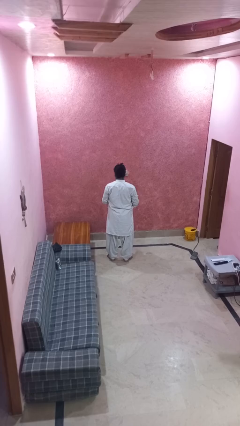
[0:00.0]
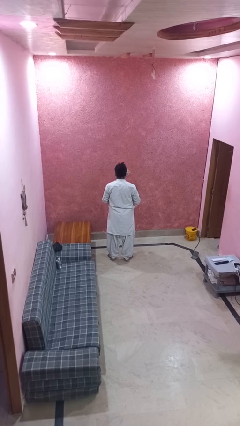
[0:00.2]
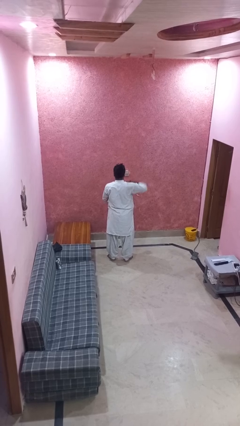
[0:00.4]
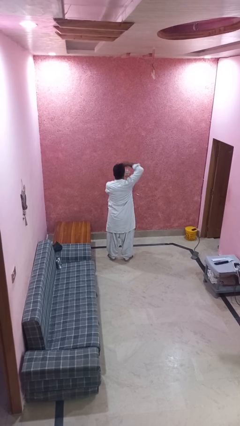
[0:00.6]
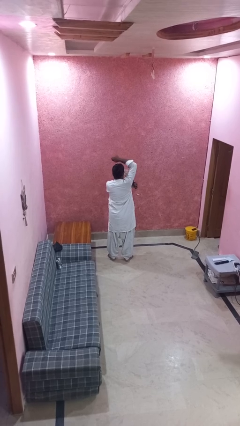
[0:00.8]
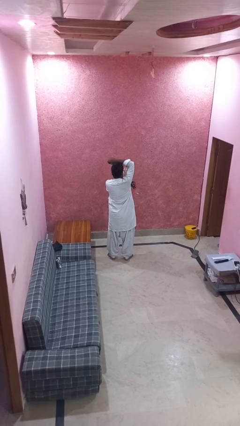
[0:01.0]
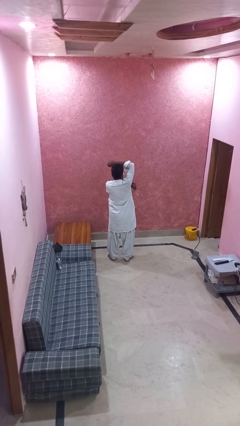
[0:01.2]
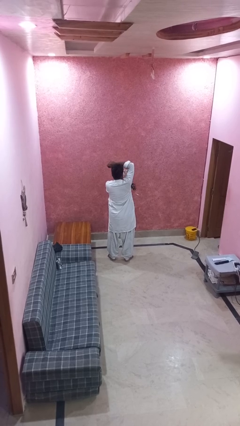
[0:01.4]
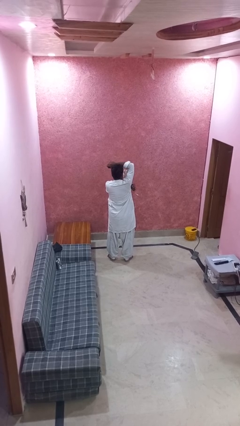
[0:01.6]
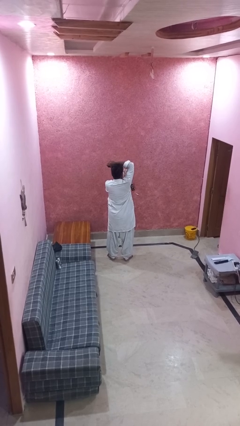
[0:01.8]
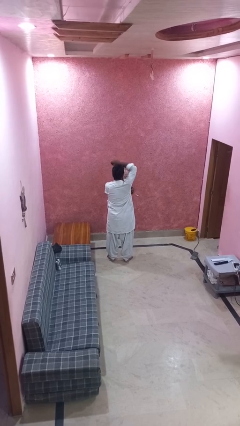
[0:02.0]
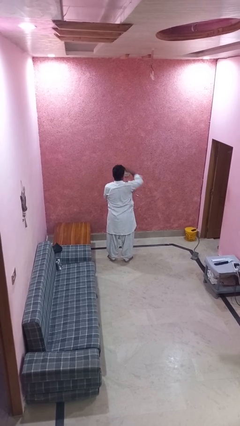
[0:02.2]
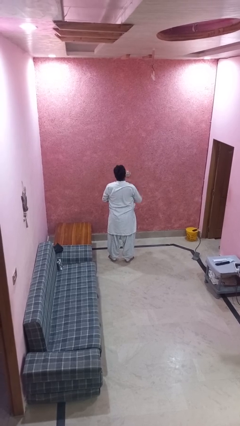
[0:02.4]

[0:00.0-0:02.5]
person applies deodorant

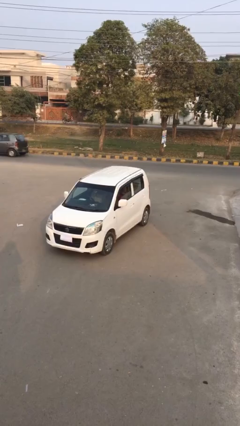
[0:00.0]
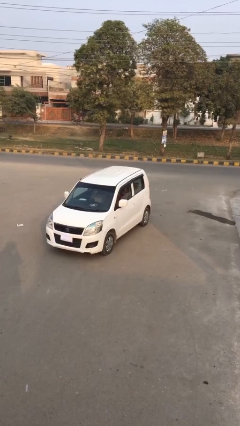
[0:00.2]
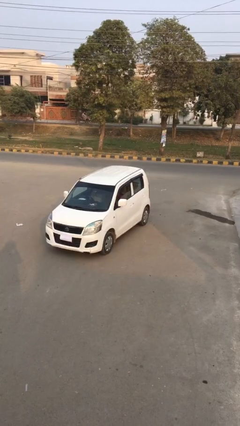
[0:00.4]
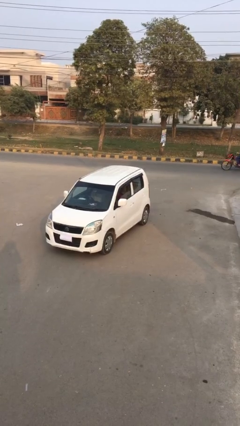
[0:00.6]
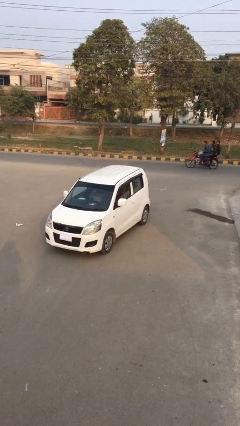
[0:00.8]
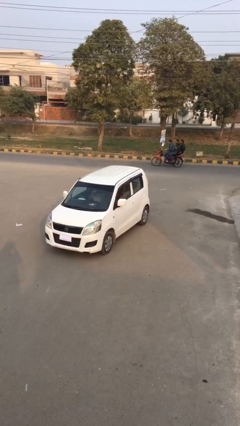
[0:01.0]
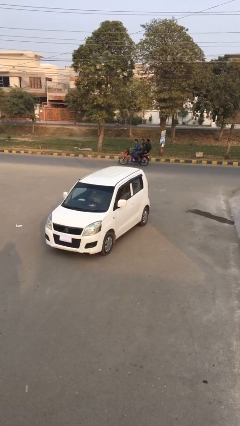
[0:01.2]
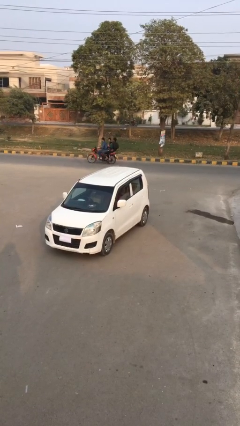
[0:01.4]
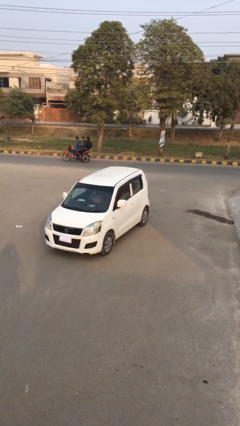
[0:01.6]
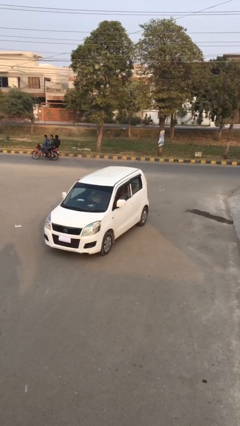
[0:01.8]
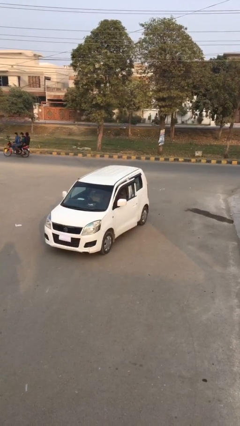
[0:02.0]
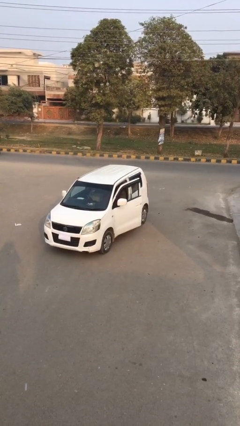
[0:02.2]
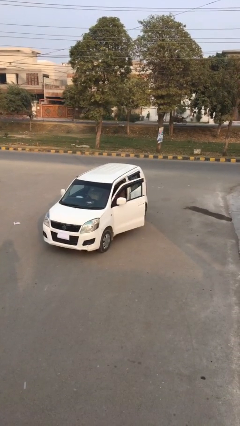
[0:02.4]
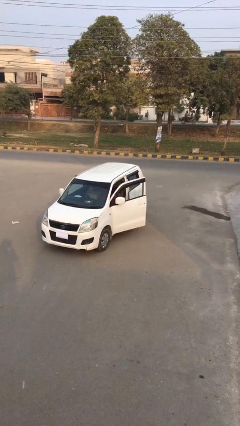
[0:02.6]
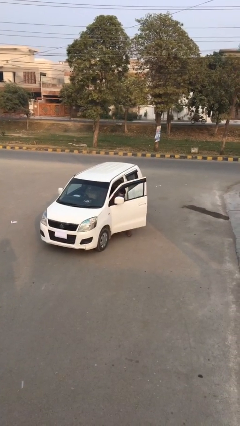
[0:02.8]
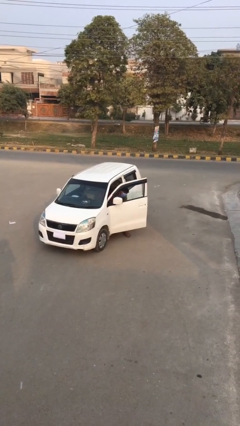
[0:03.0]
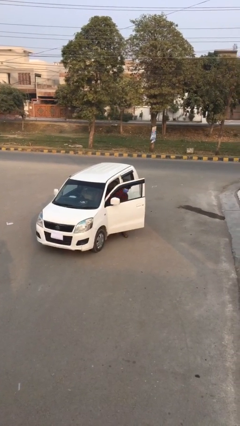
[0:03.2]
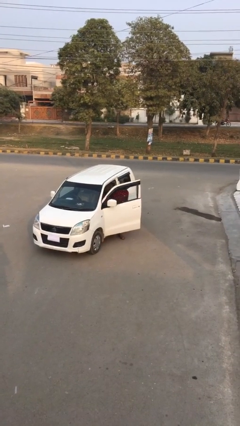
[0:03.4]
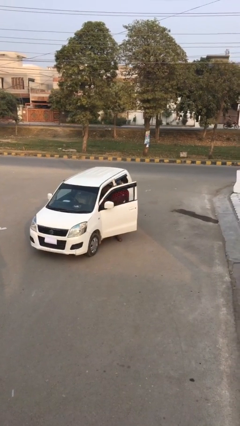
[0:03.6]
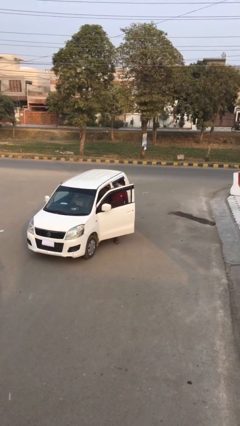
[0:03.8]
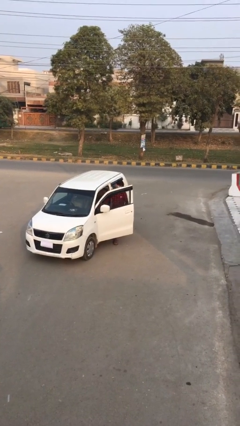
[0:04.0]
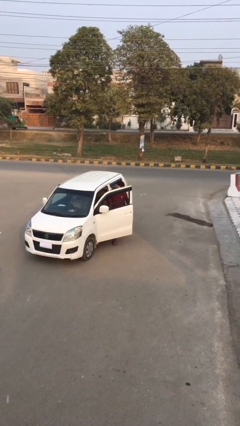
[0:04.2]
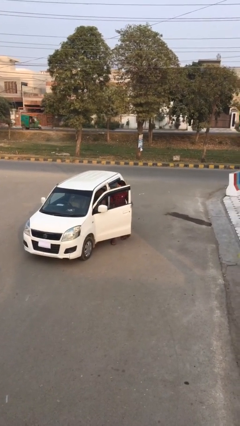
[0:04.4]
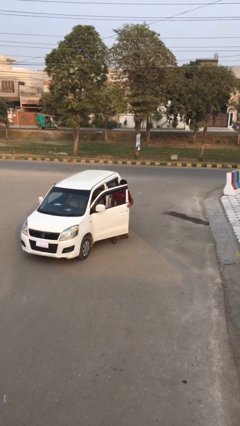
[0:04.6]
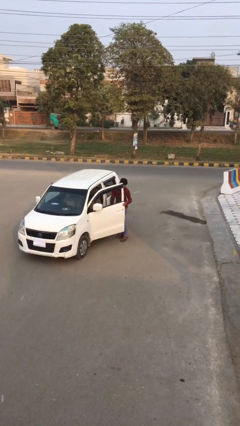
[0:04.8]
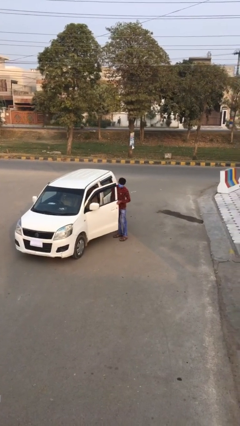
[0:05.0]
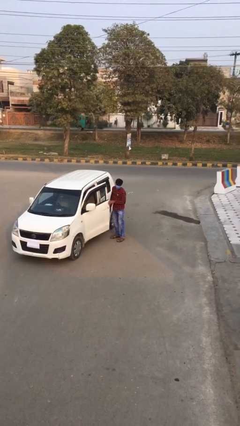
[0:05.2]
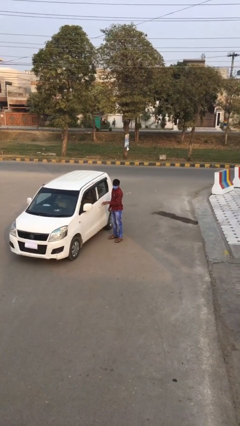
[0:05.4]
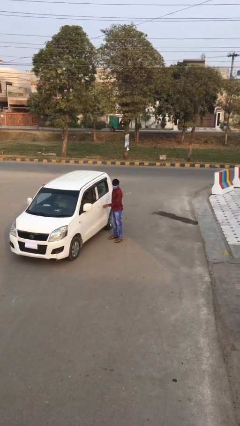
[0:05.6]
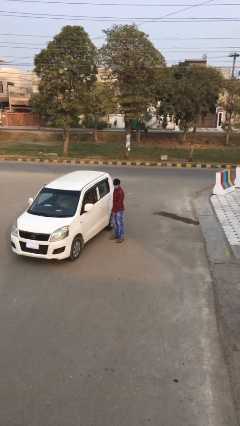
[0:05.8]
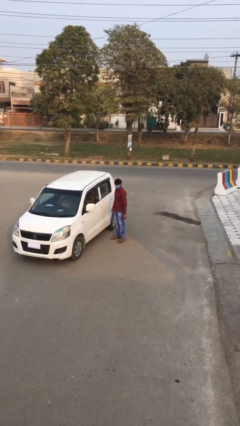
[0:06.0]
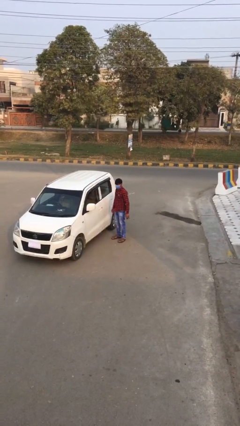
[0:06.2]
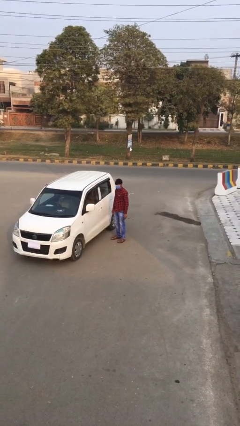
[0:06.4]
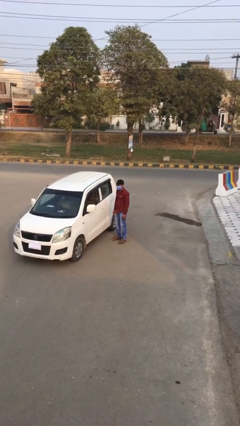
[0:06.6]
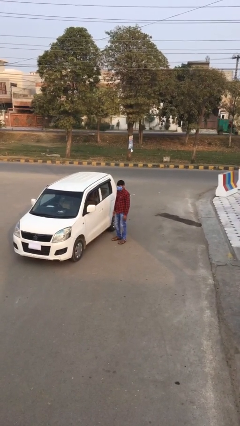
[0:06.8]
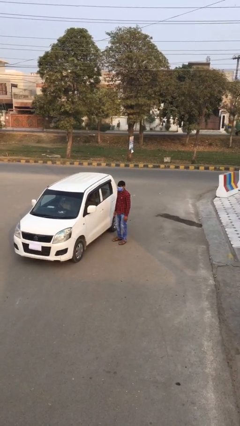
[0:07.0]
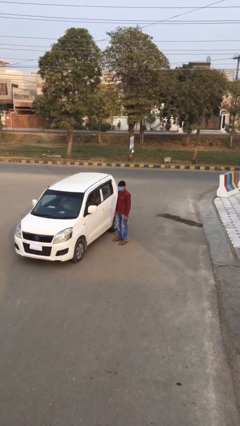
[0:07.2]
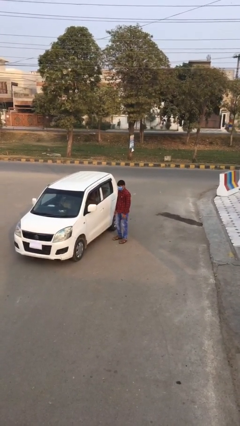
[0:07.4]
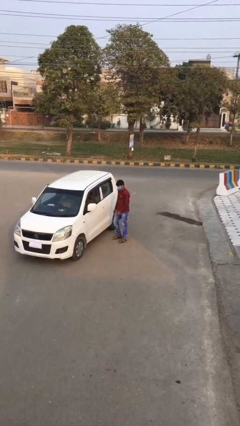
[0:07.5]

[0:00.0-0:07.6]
person exits car

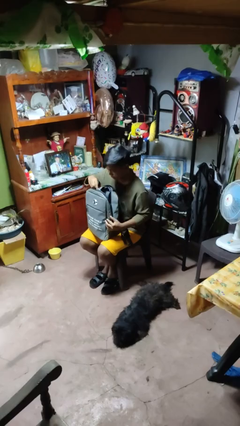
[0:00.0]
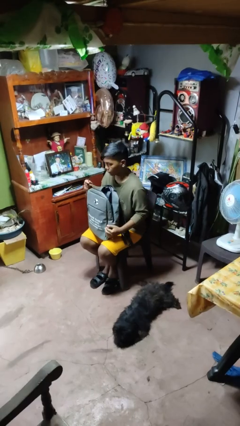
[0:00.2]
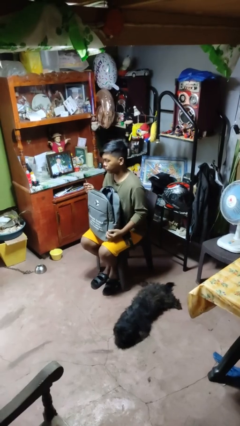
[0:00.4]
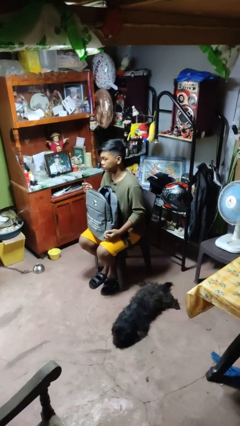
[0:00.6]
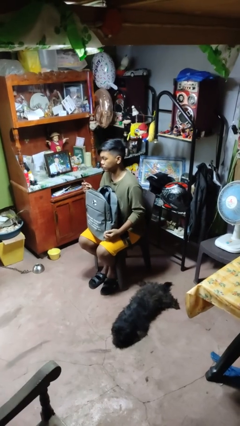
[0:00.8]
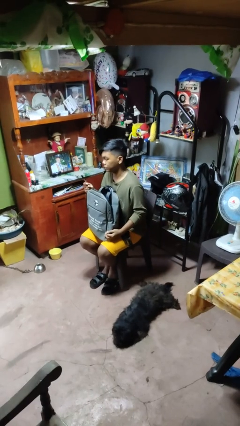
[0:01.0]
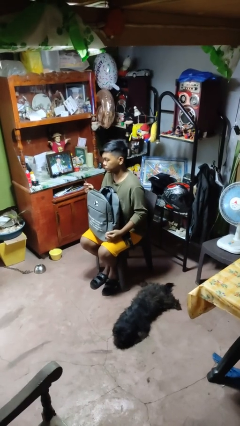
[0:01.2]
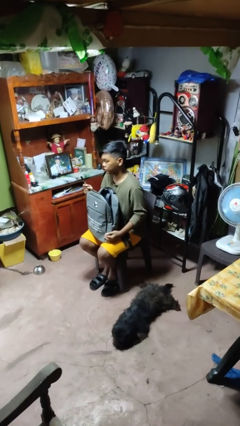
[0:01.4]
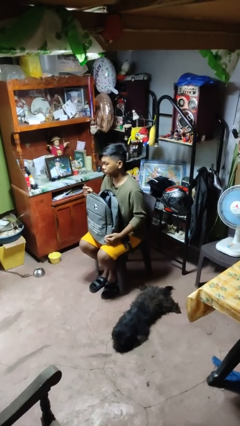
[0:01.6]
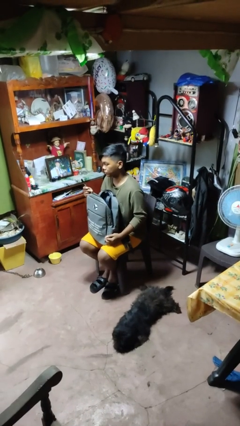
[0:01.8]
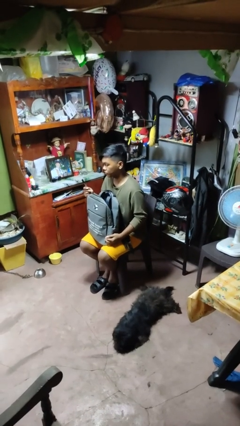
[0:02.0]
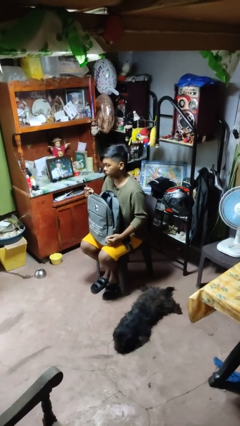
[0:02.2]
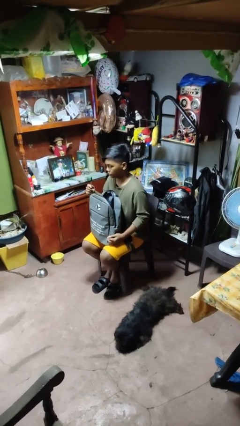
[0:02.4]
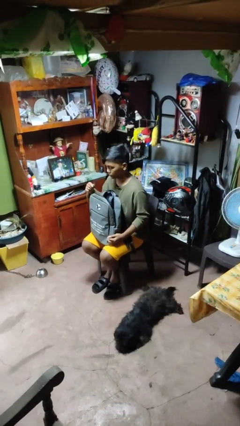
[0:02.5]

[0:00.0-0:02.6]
person takes object from backpack

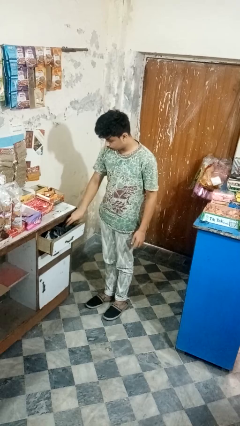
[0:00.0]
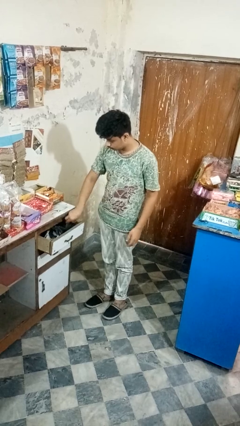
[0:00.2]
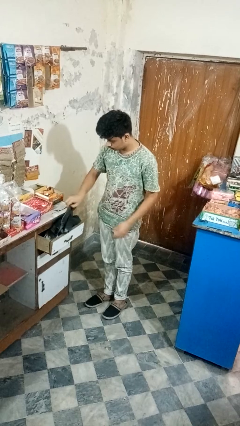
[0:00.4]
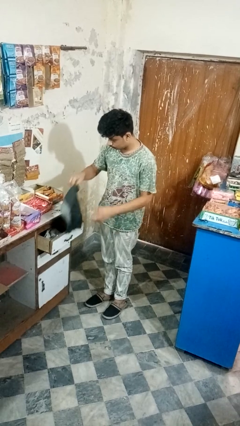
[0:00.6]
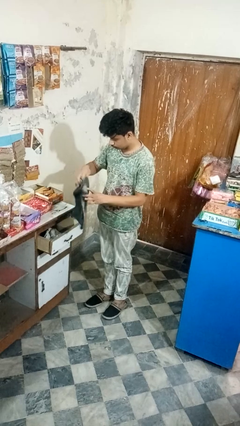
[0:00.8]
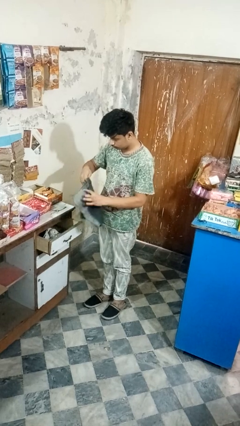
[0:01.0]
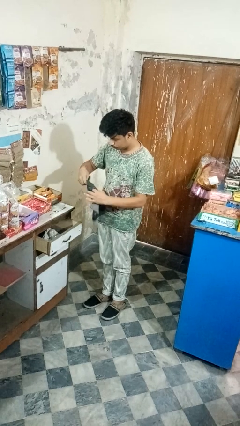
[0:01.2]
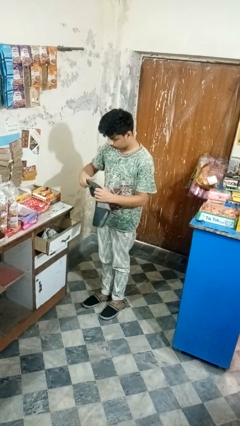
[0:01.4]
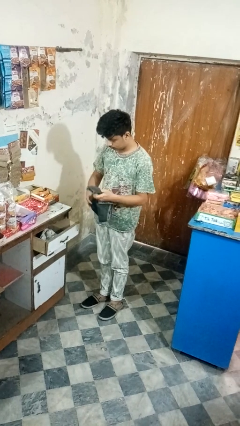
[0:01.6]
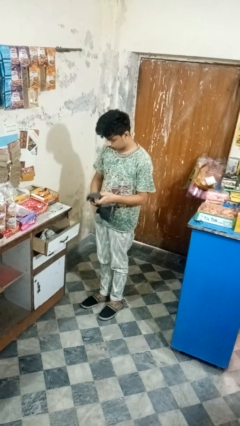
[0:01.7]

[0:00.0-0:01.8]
person takes clothes from dresser

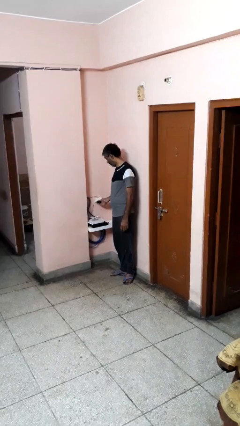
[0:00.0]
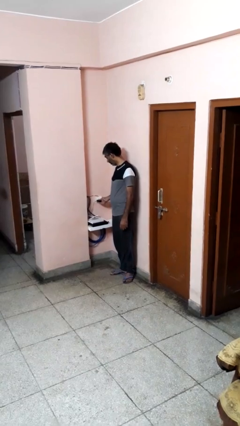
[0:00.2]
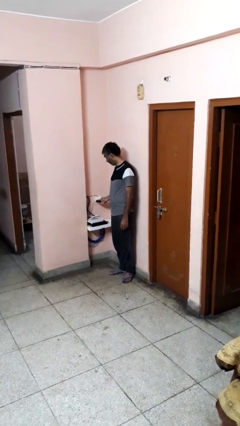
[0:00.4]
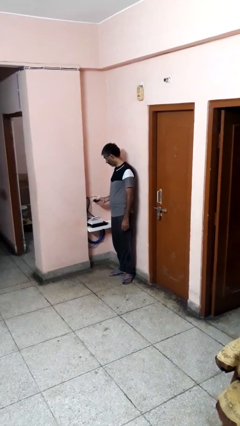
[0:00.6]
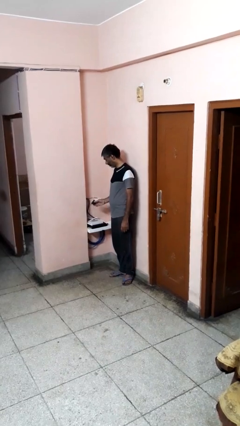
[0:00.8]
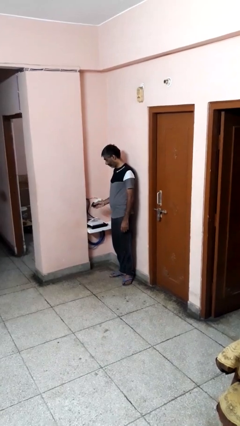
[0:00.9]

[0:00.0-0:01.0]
person unplugs from electrical socket

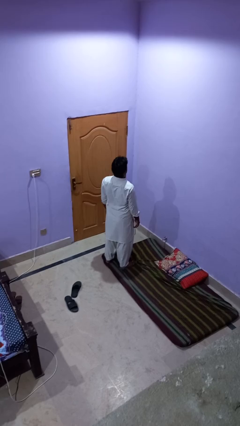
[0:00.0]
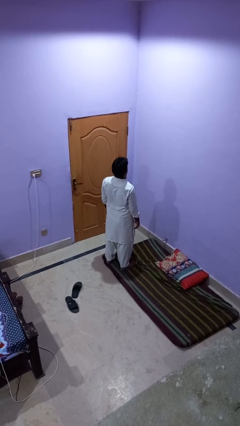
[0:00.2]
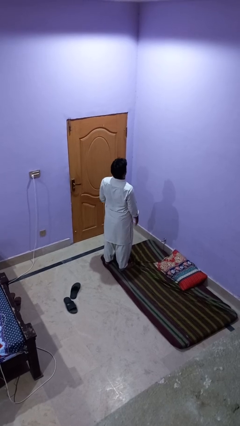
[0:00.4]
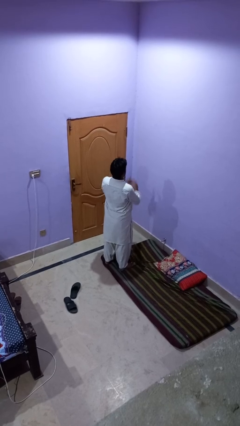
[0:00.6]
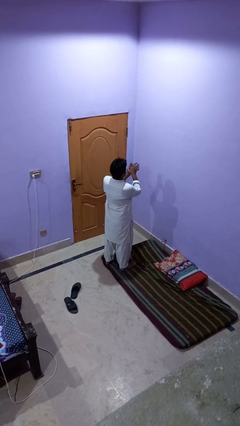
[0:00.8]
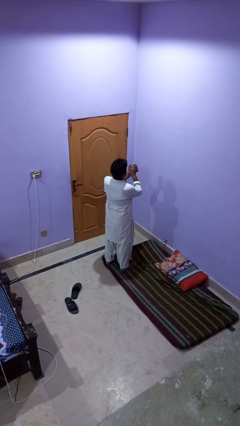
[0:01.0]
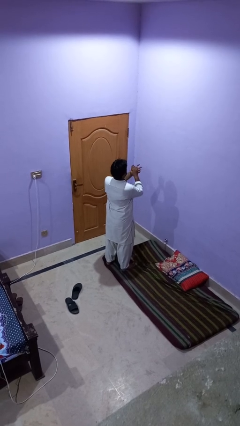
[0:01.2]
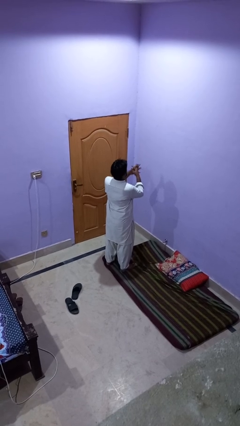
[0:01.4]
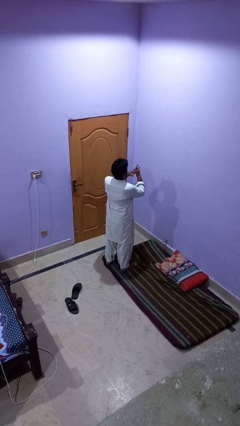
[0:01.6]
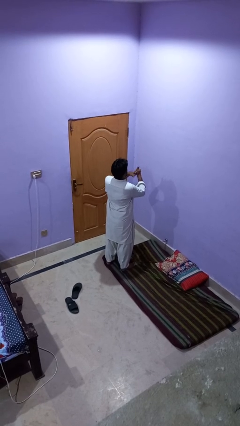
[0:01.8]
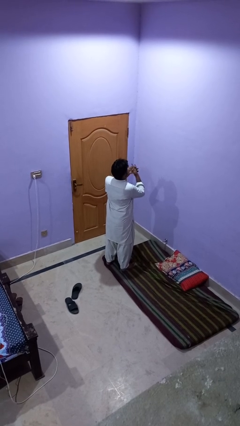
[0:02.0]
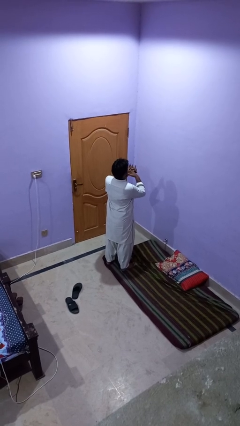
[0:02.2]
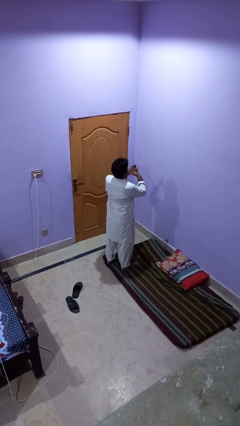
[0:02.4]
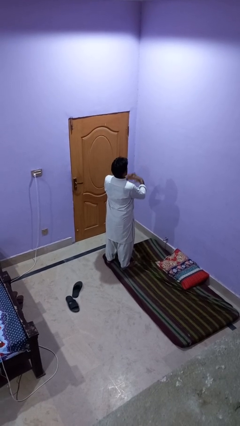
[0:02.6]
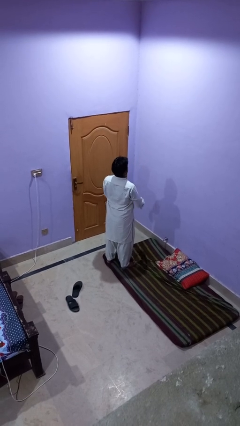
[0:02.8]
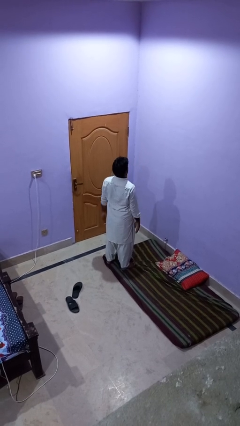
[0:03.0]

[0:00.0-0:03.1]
person snaps fingers
